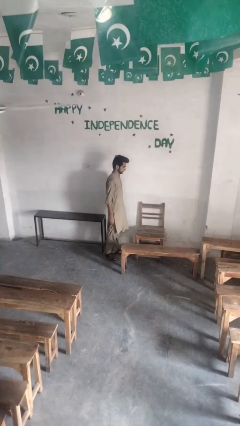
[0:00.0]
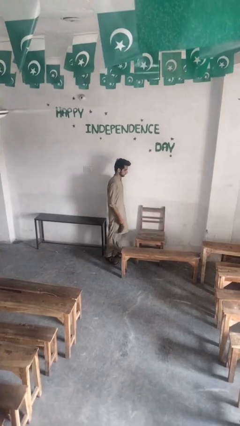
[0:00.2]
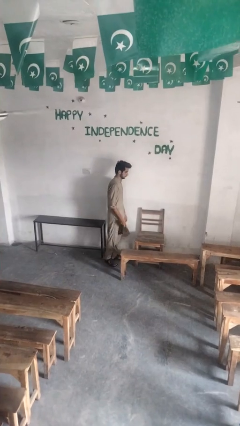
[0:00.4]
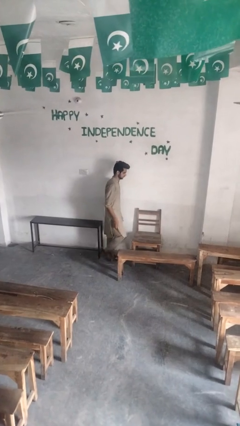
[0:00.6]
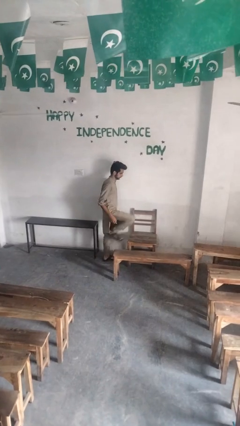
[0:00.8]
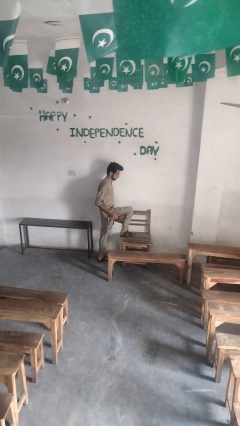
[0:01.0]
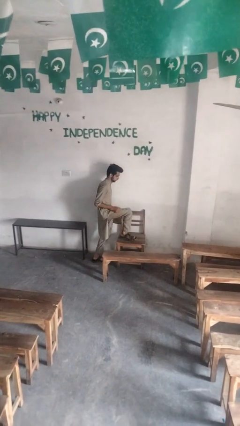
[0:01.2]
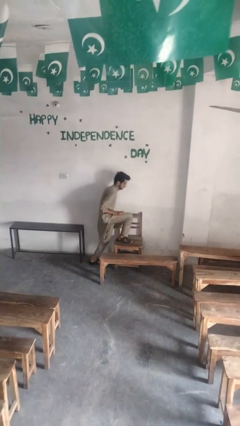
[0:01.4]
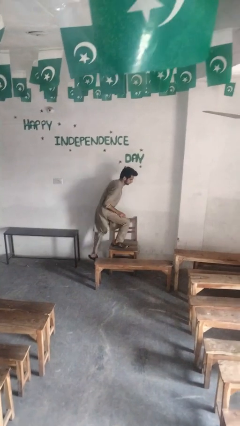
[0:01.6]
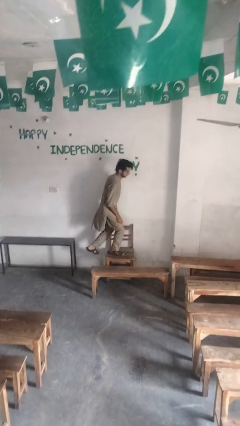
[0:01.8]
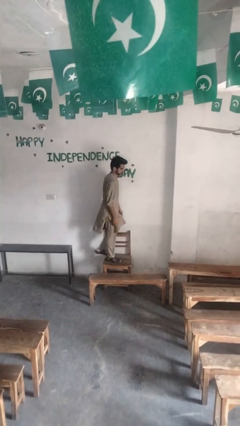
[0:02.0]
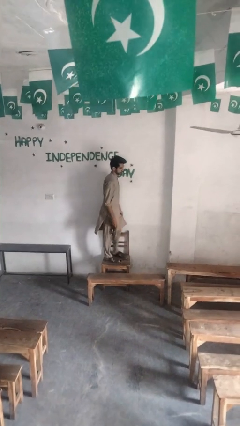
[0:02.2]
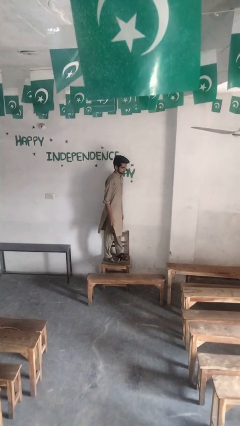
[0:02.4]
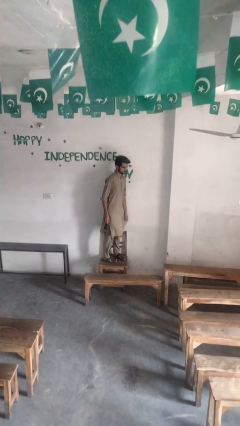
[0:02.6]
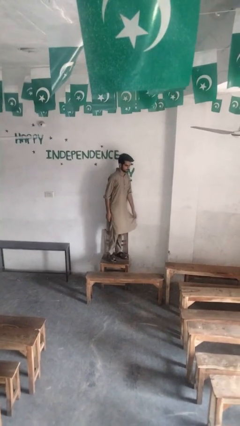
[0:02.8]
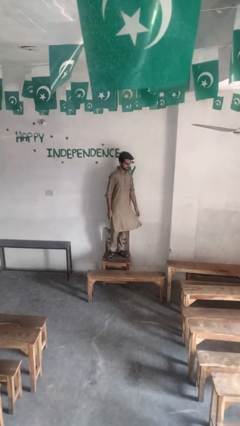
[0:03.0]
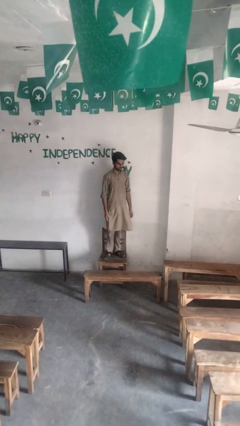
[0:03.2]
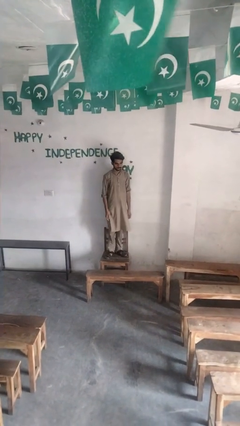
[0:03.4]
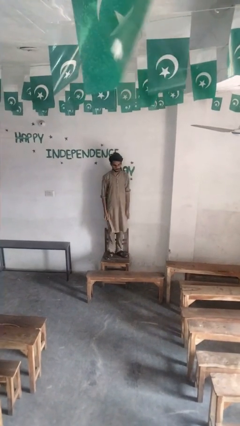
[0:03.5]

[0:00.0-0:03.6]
person climbs on chair

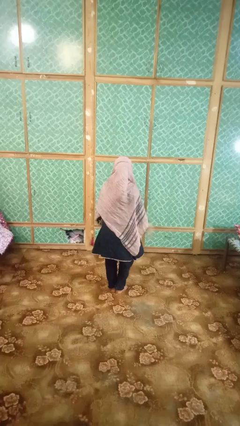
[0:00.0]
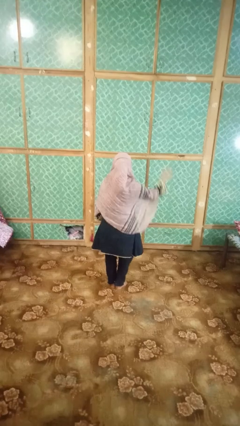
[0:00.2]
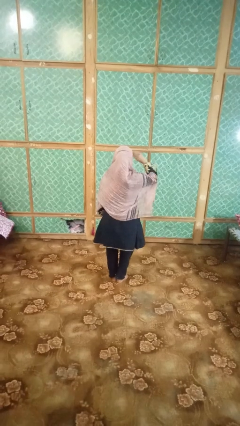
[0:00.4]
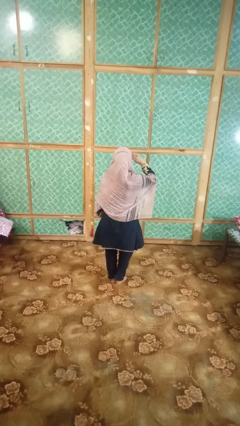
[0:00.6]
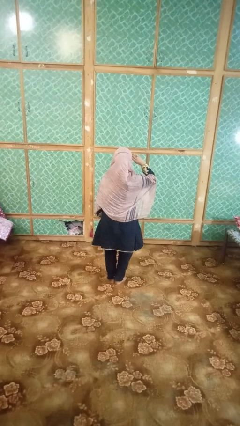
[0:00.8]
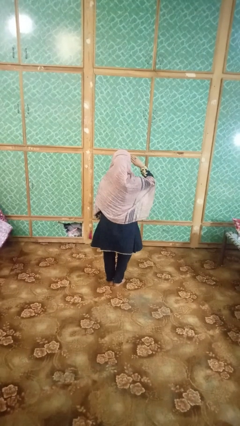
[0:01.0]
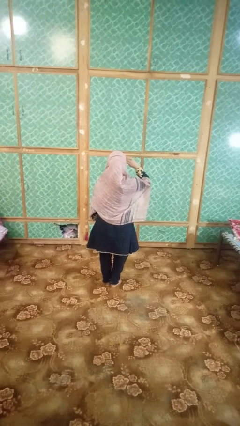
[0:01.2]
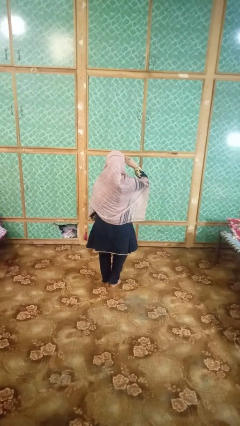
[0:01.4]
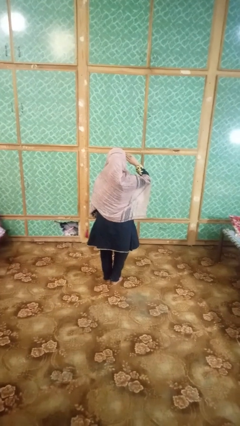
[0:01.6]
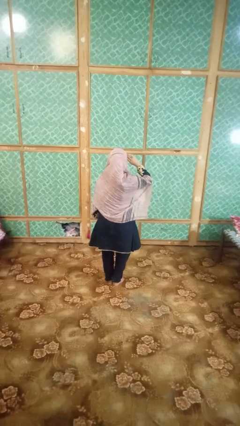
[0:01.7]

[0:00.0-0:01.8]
person salutes

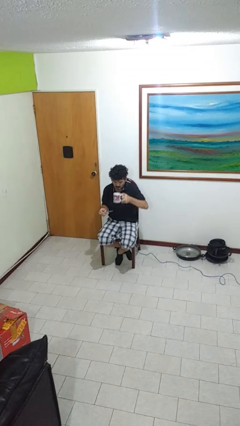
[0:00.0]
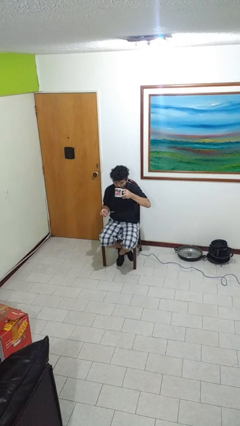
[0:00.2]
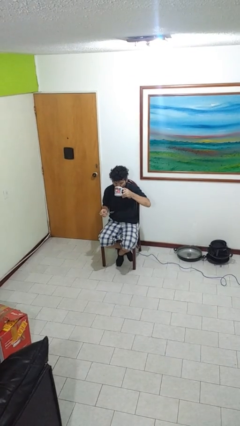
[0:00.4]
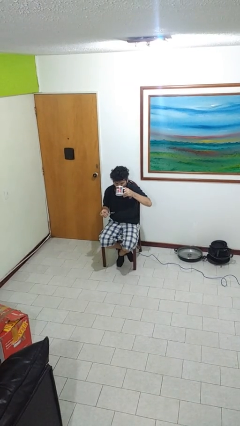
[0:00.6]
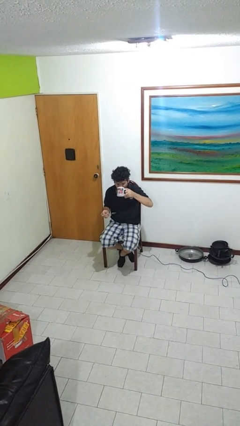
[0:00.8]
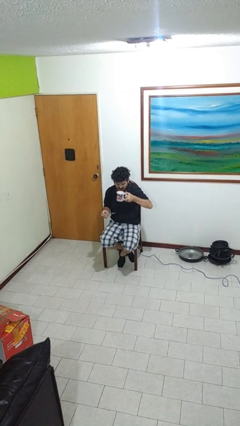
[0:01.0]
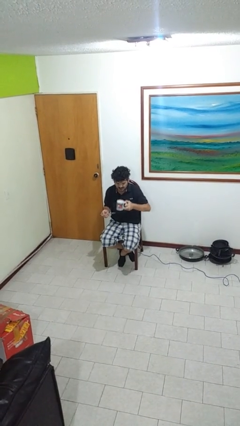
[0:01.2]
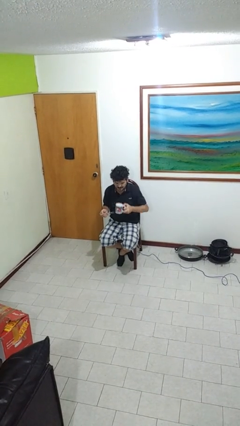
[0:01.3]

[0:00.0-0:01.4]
person drinks from mug

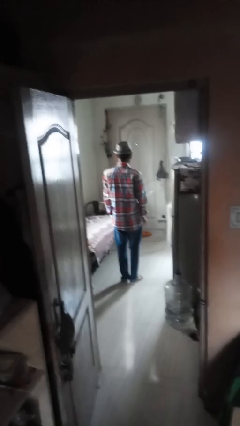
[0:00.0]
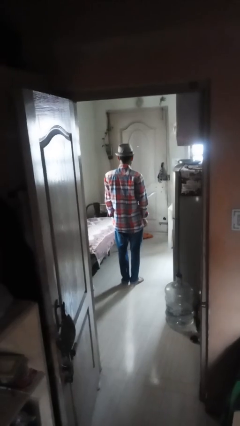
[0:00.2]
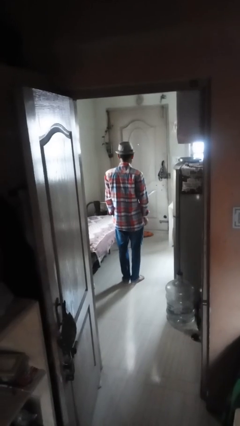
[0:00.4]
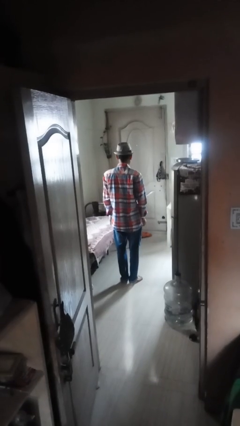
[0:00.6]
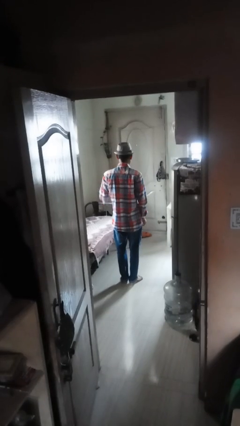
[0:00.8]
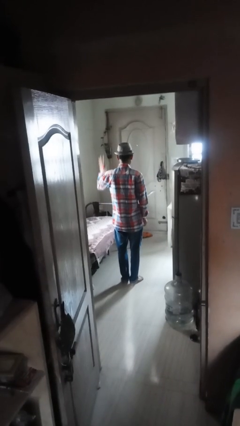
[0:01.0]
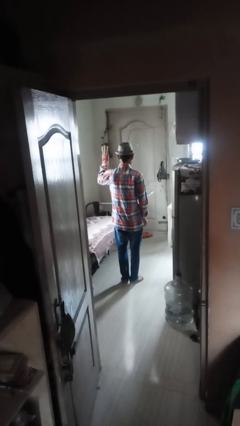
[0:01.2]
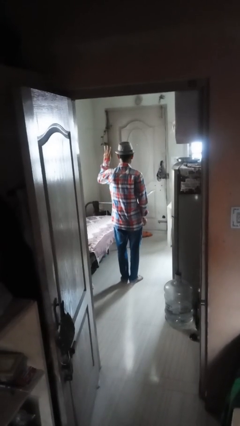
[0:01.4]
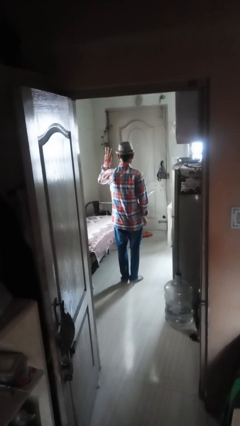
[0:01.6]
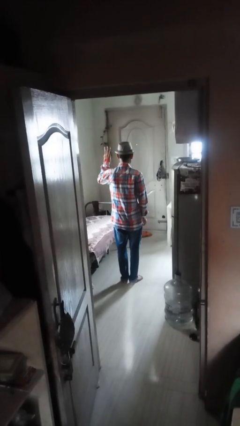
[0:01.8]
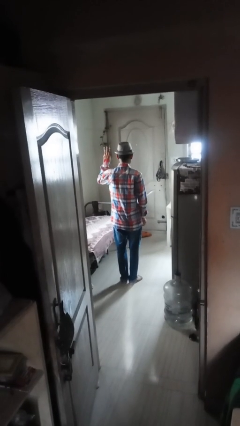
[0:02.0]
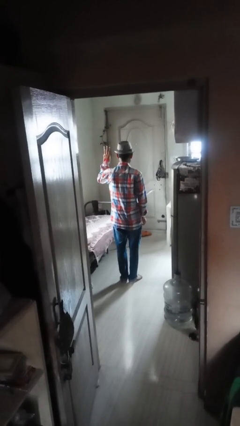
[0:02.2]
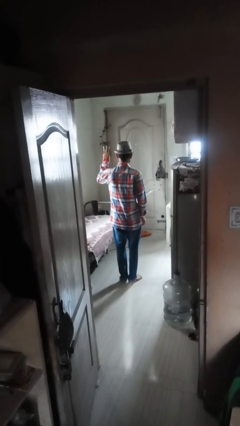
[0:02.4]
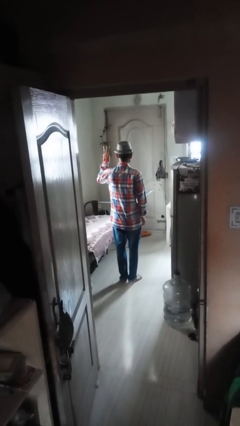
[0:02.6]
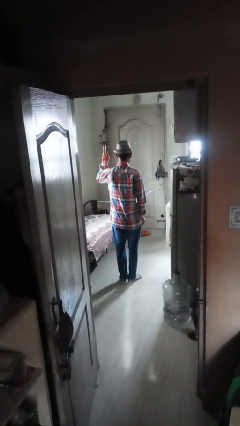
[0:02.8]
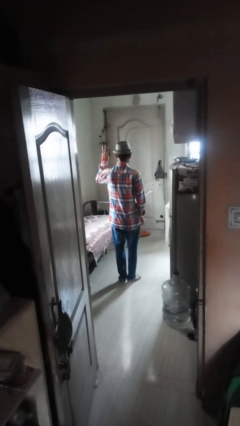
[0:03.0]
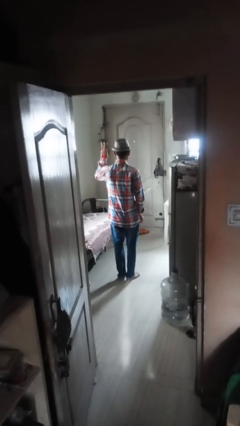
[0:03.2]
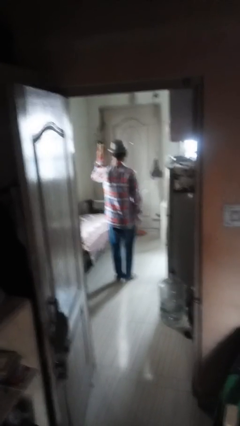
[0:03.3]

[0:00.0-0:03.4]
person gestures number three

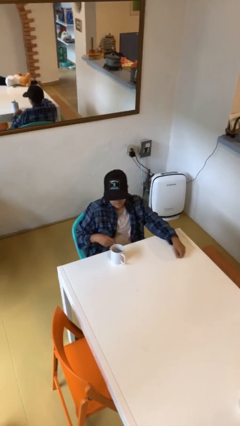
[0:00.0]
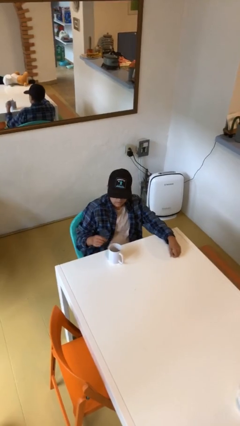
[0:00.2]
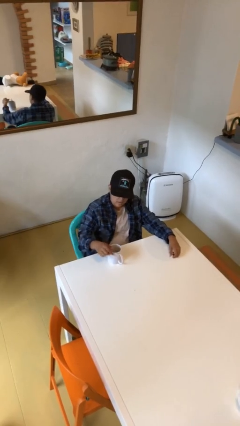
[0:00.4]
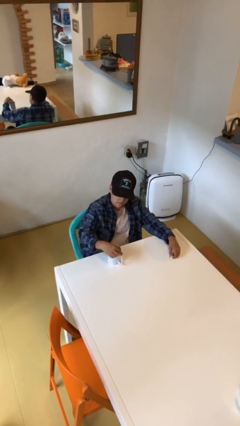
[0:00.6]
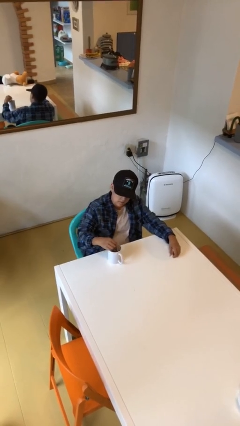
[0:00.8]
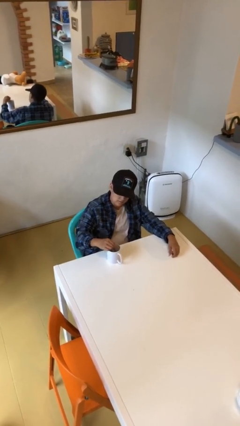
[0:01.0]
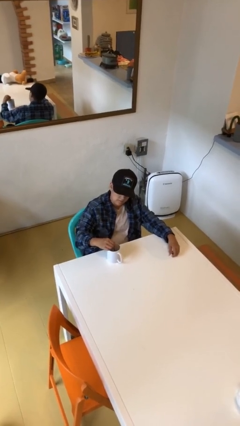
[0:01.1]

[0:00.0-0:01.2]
person stirs mug

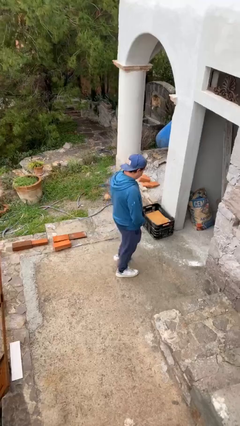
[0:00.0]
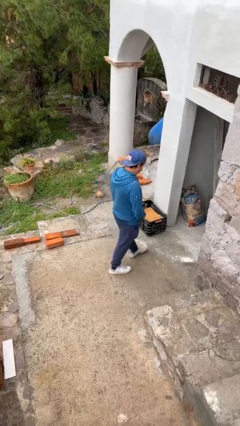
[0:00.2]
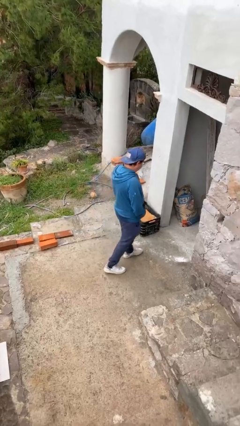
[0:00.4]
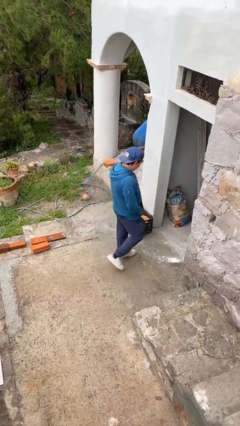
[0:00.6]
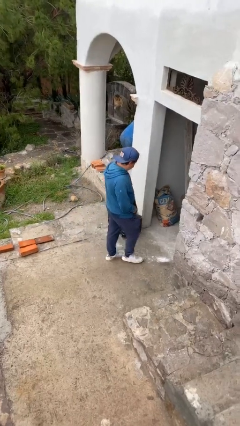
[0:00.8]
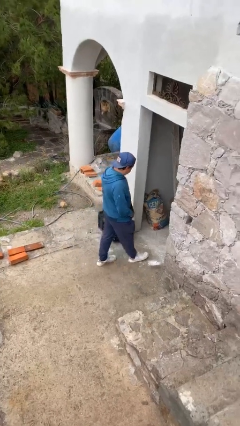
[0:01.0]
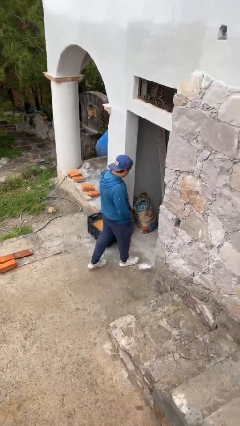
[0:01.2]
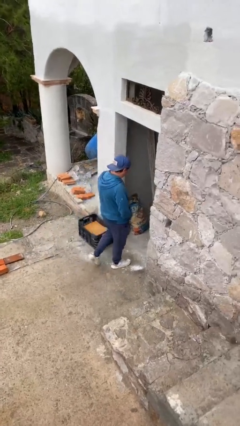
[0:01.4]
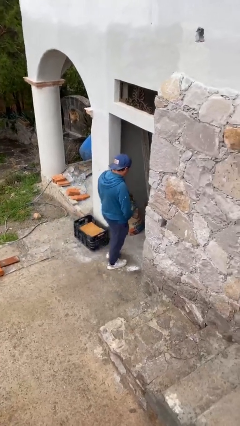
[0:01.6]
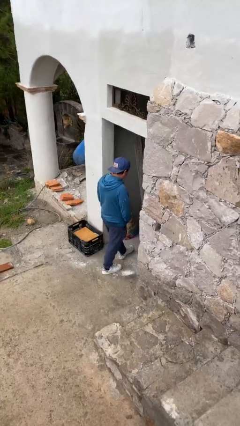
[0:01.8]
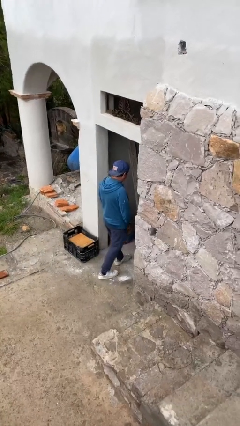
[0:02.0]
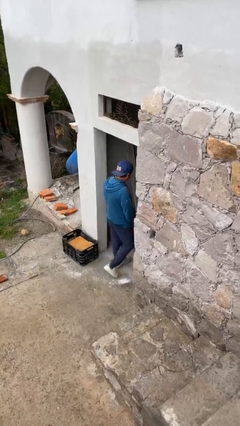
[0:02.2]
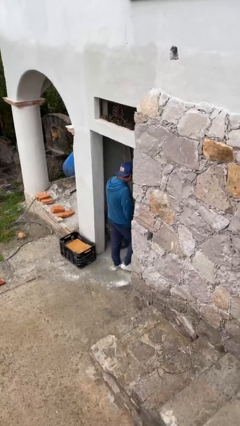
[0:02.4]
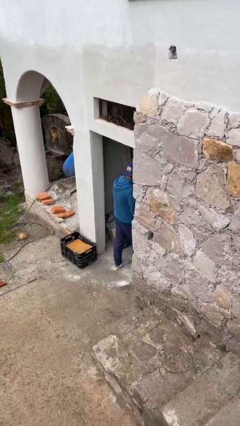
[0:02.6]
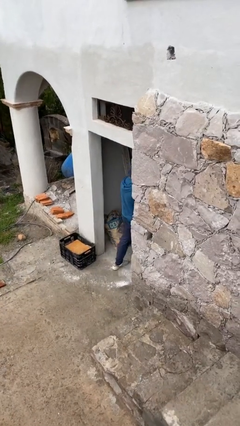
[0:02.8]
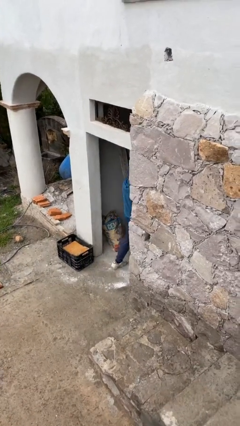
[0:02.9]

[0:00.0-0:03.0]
person exits scene through structure

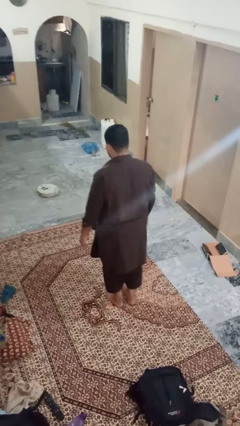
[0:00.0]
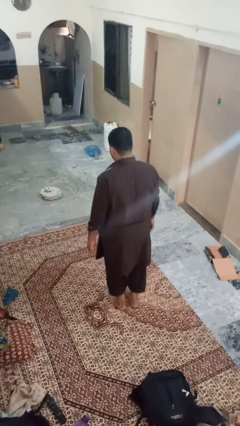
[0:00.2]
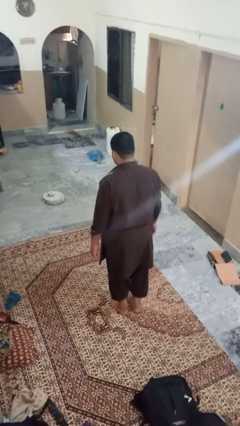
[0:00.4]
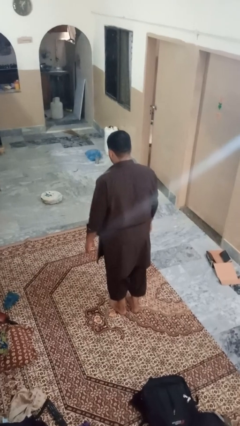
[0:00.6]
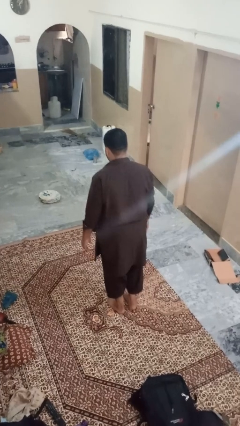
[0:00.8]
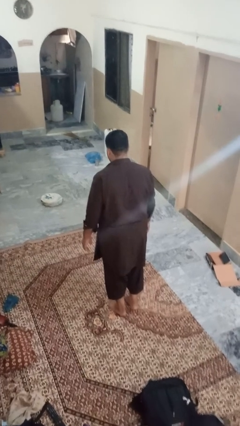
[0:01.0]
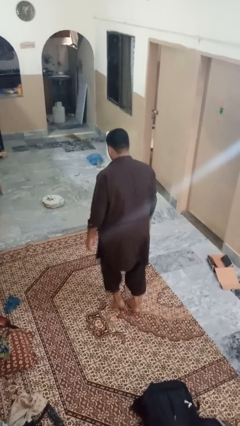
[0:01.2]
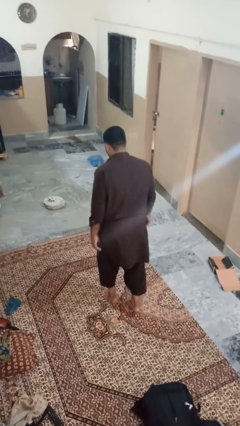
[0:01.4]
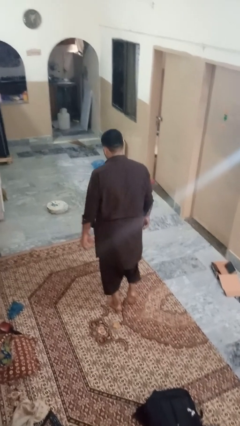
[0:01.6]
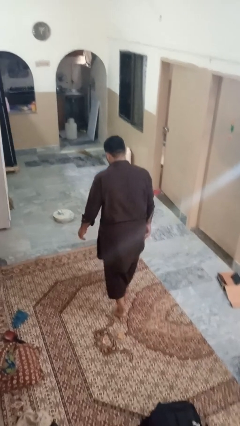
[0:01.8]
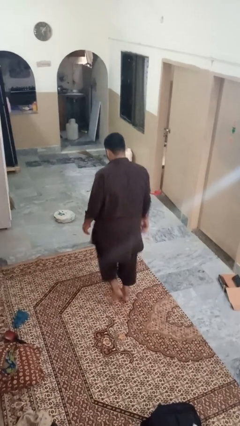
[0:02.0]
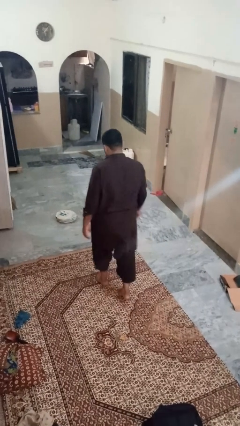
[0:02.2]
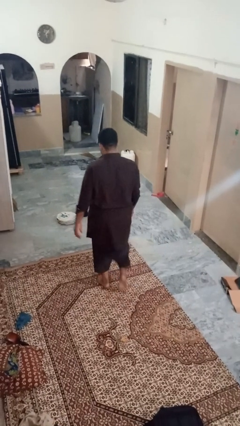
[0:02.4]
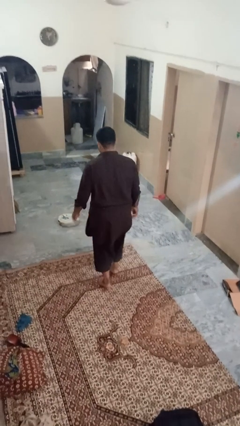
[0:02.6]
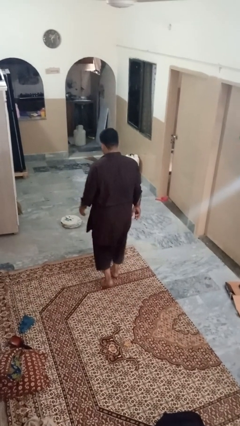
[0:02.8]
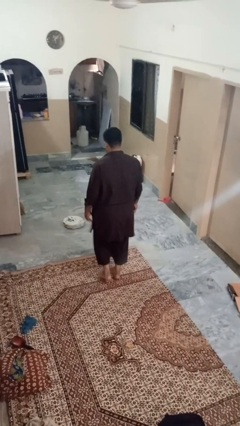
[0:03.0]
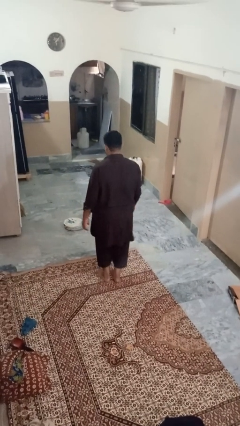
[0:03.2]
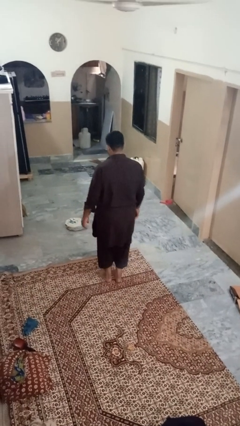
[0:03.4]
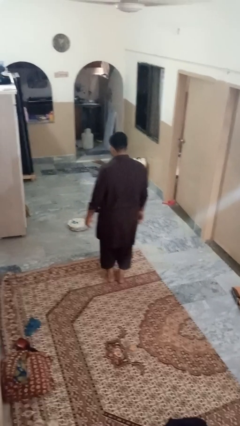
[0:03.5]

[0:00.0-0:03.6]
person walks tiptoe
